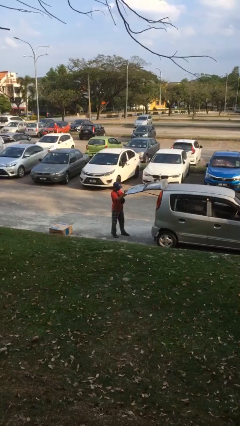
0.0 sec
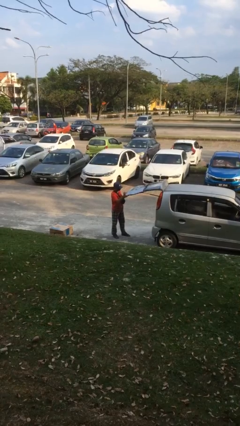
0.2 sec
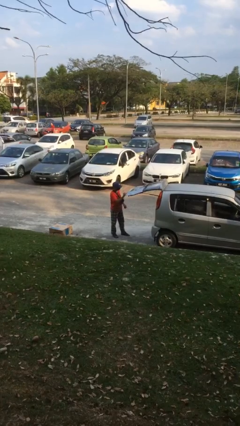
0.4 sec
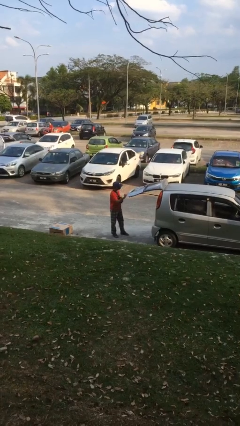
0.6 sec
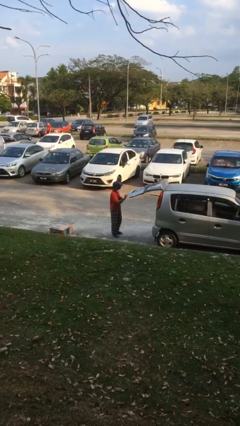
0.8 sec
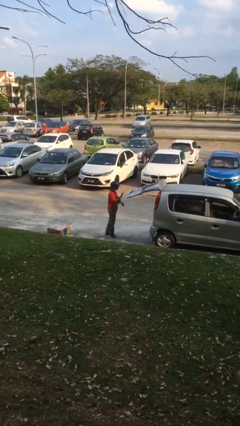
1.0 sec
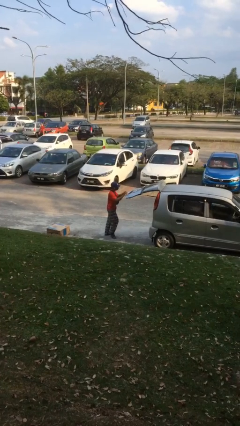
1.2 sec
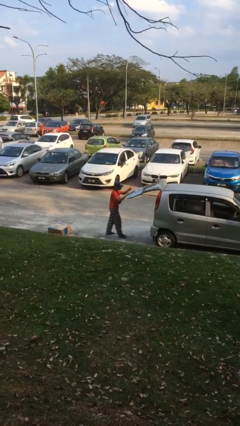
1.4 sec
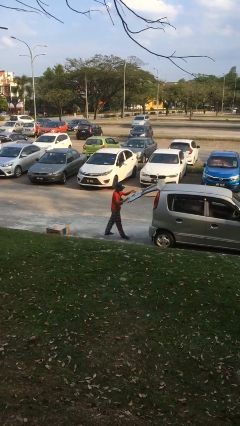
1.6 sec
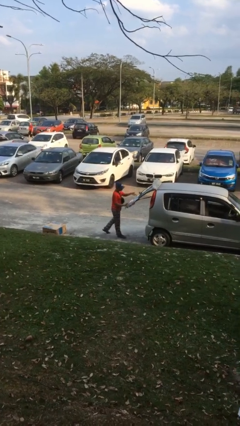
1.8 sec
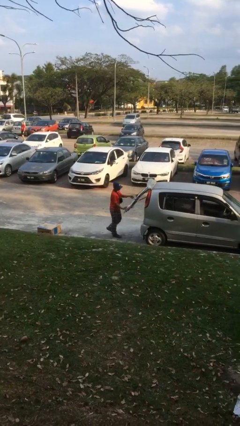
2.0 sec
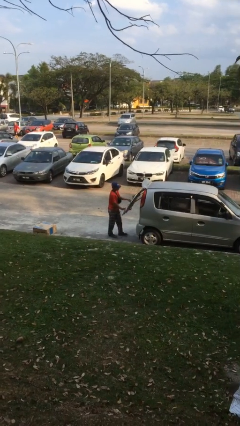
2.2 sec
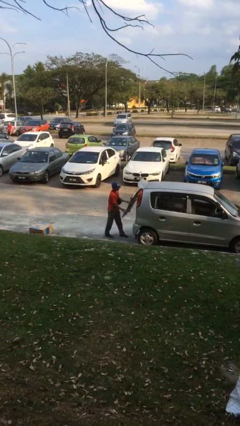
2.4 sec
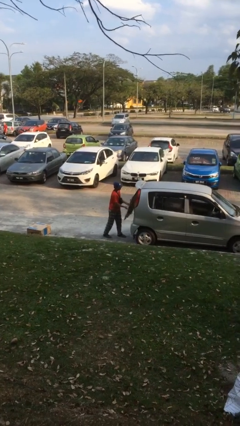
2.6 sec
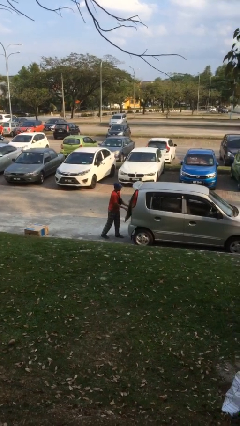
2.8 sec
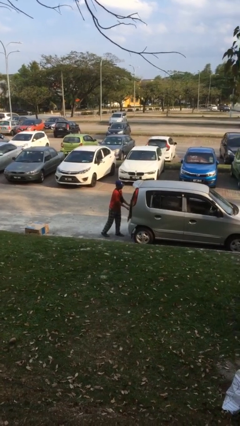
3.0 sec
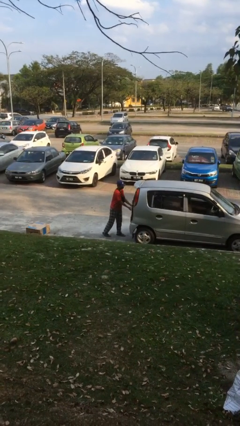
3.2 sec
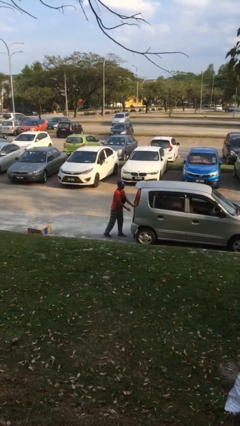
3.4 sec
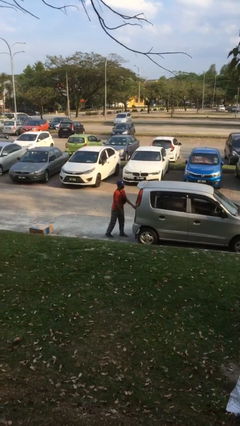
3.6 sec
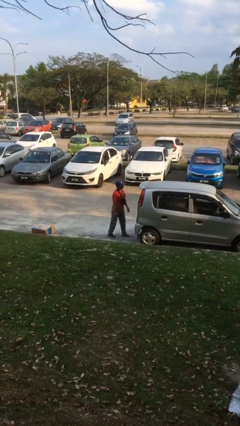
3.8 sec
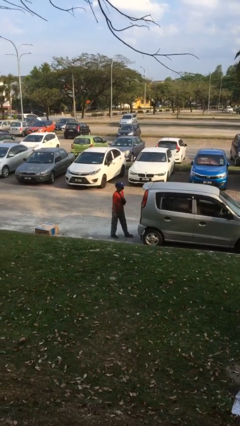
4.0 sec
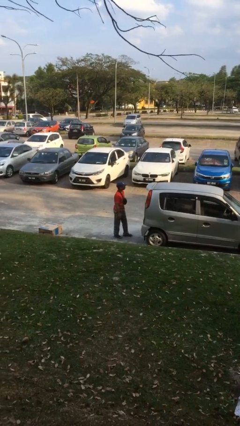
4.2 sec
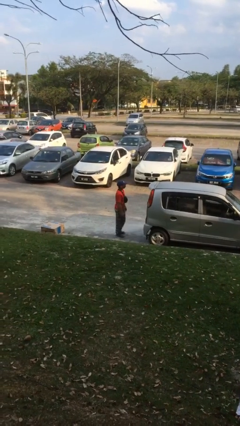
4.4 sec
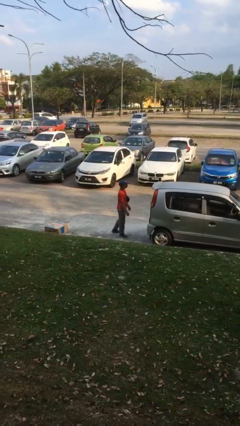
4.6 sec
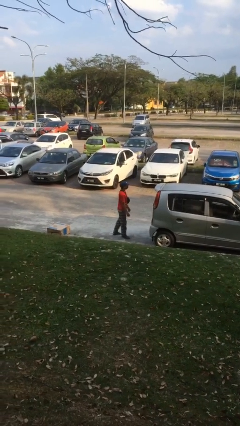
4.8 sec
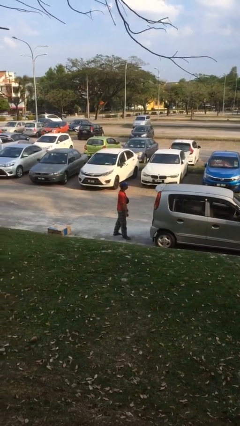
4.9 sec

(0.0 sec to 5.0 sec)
person closes car trunk

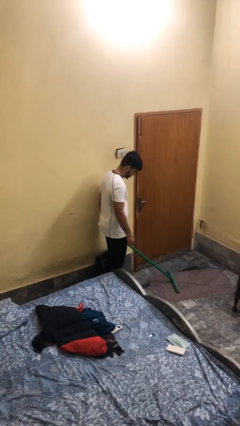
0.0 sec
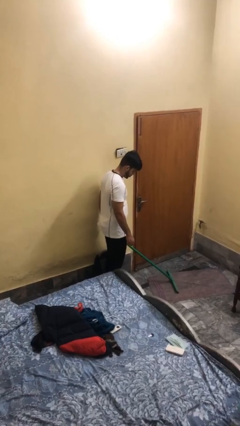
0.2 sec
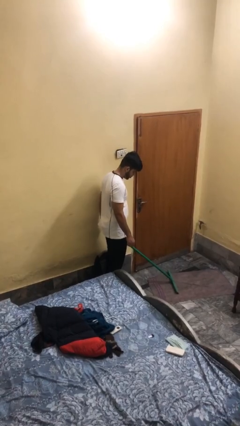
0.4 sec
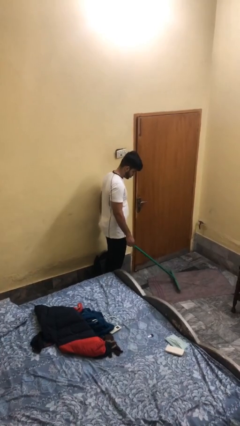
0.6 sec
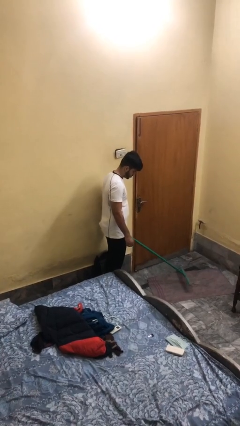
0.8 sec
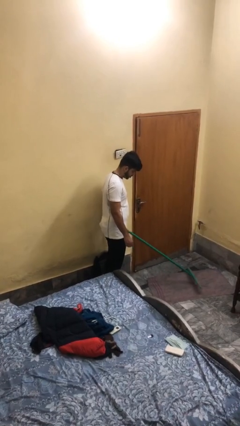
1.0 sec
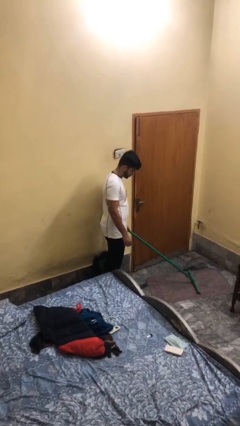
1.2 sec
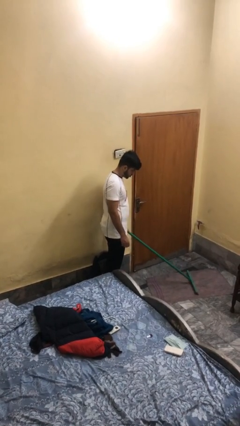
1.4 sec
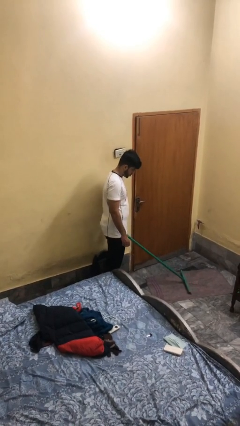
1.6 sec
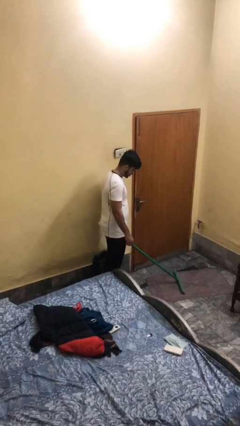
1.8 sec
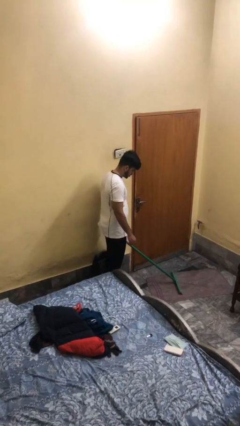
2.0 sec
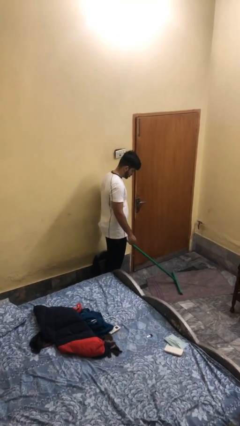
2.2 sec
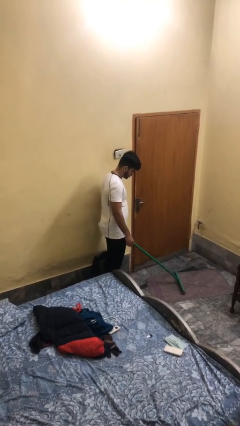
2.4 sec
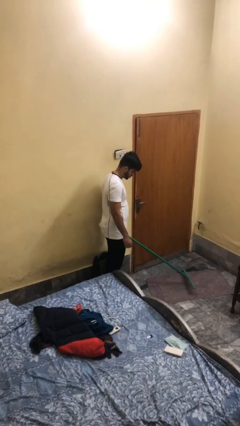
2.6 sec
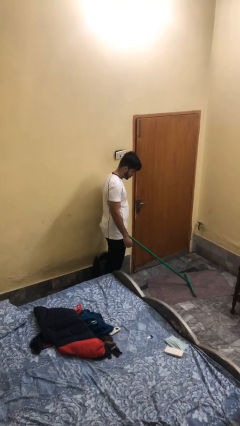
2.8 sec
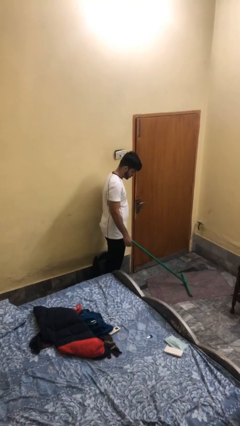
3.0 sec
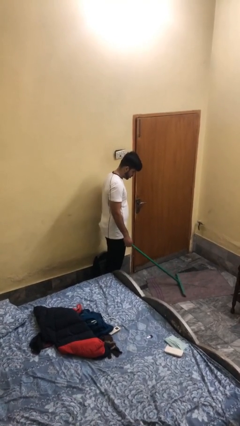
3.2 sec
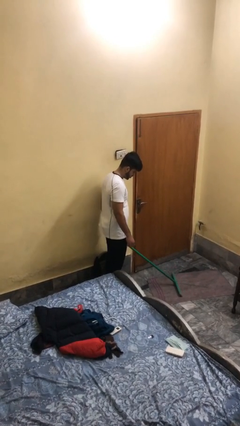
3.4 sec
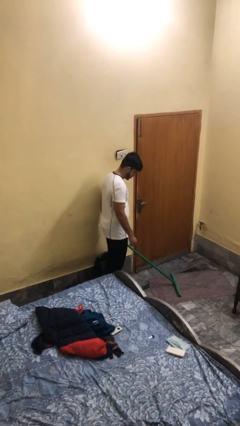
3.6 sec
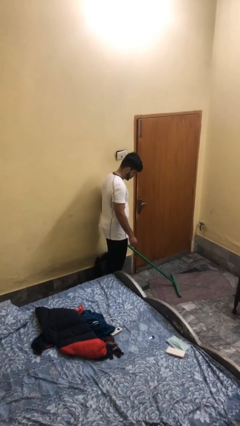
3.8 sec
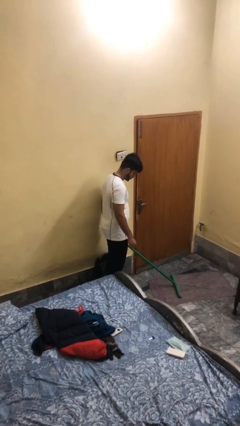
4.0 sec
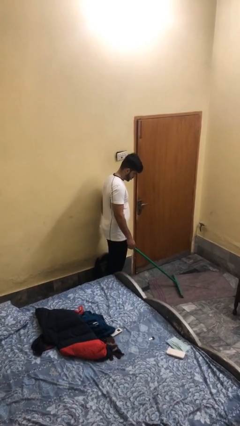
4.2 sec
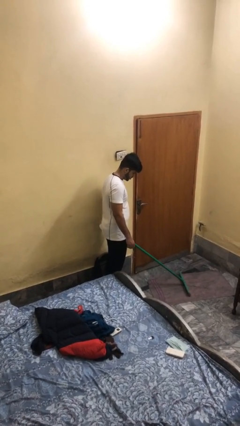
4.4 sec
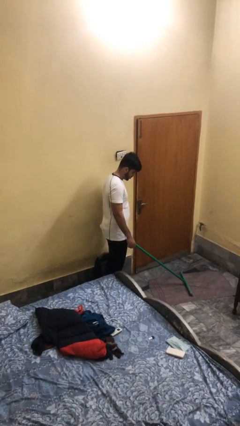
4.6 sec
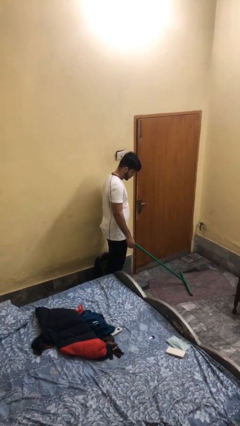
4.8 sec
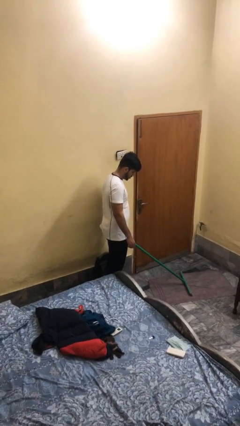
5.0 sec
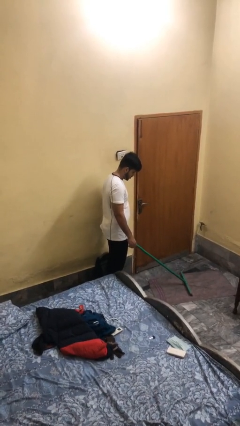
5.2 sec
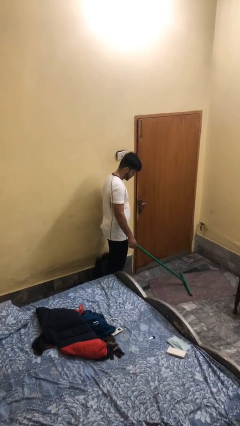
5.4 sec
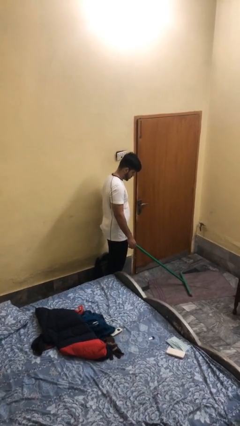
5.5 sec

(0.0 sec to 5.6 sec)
person vacuums carpet

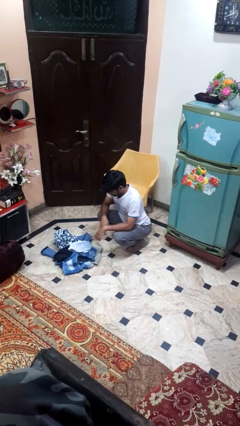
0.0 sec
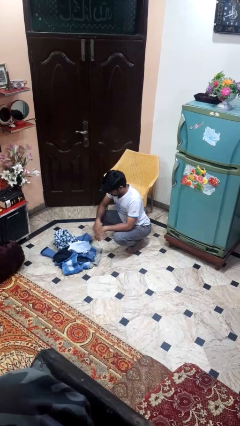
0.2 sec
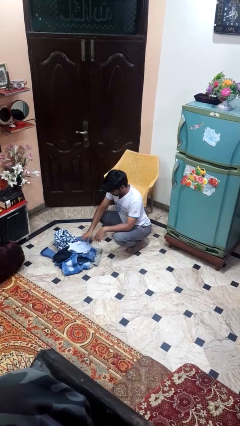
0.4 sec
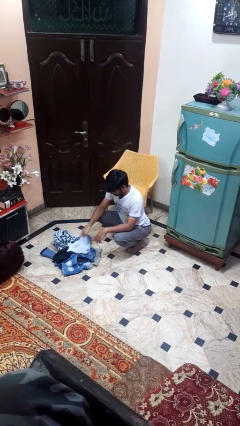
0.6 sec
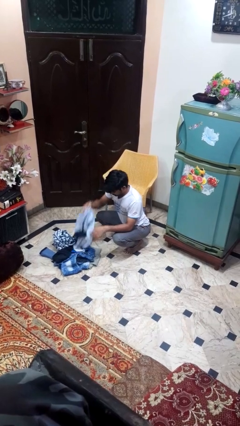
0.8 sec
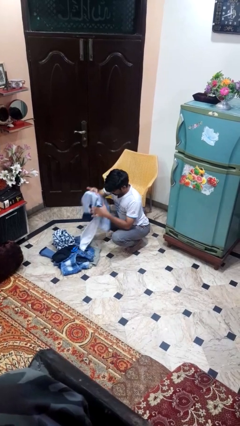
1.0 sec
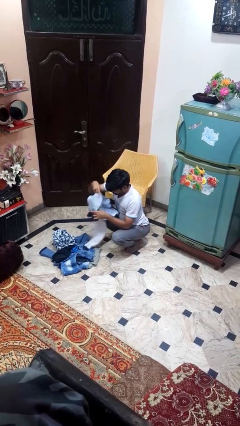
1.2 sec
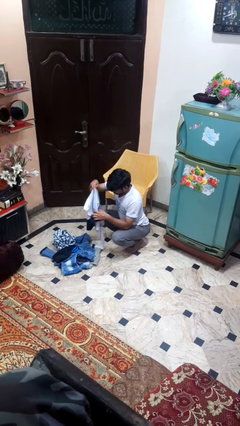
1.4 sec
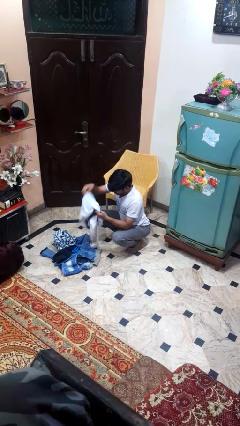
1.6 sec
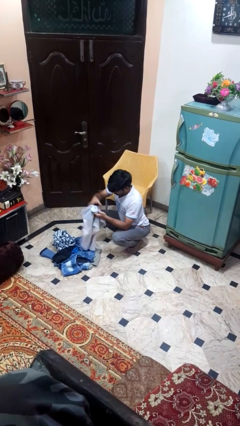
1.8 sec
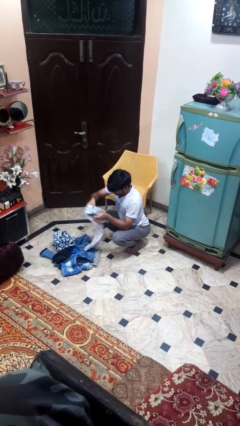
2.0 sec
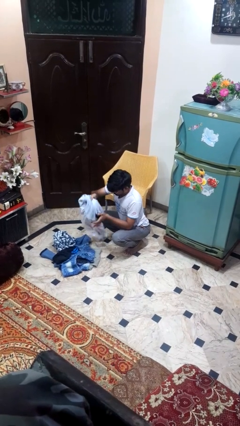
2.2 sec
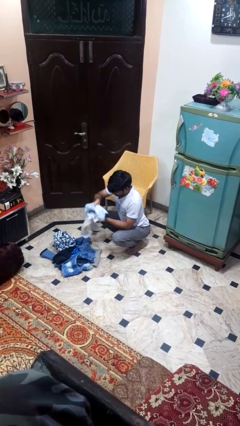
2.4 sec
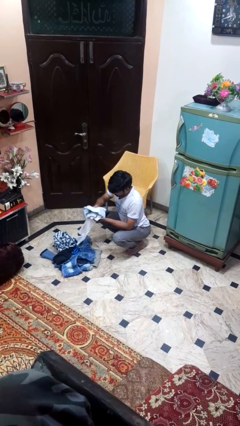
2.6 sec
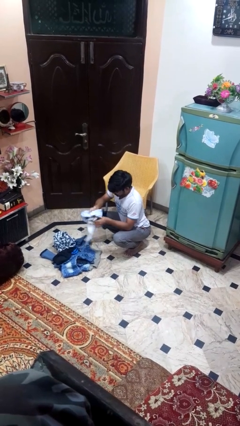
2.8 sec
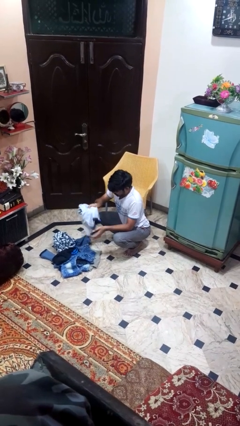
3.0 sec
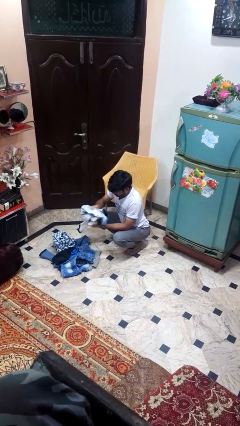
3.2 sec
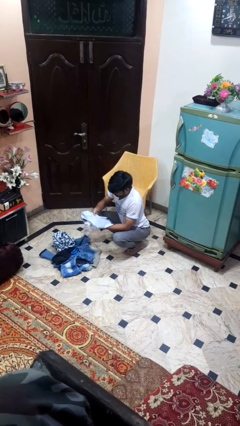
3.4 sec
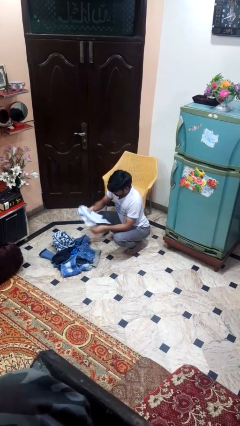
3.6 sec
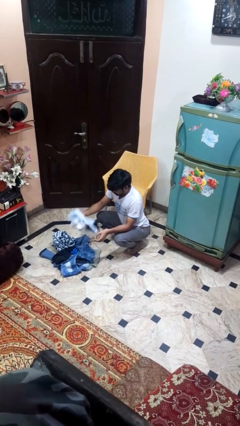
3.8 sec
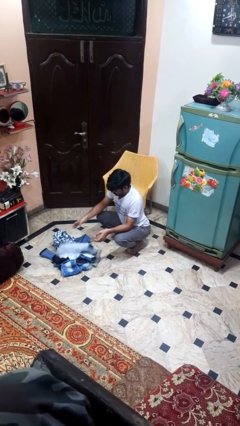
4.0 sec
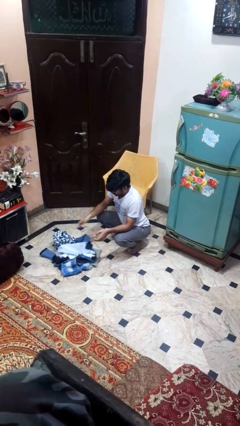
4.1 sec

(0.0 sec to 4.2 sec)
person folds pants

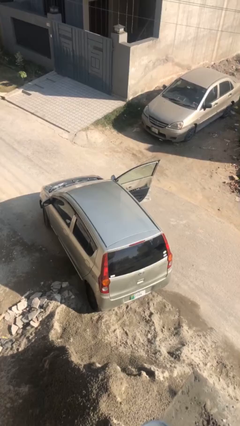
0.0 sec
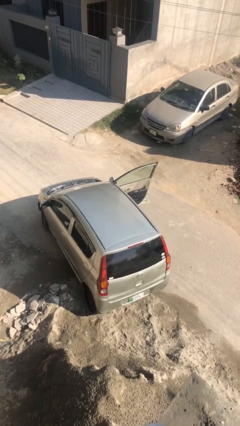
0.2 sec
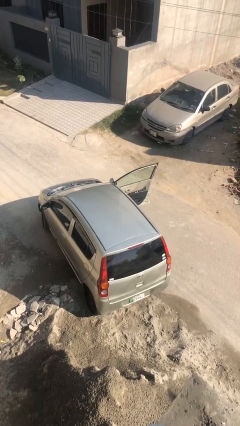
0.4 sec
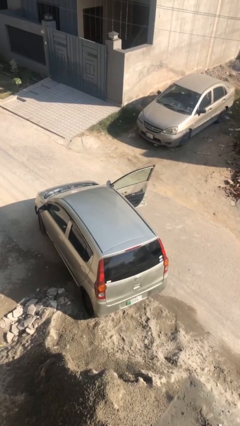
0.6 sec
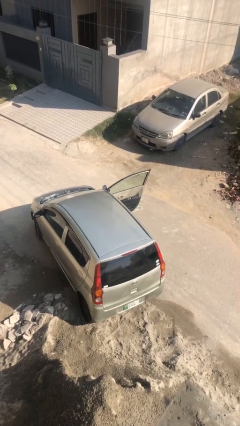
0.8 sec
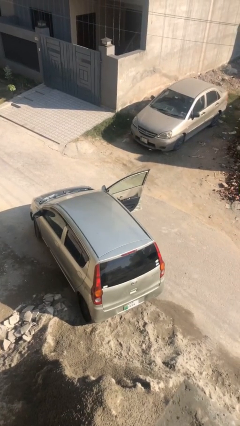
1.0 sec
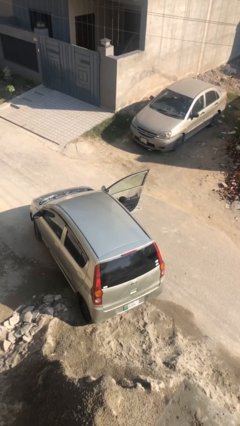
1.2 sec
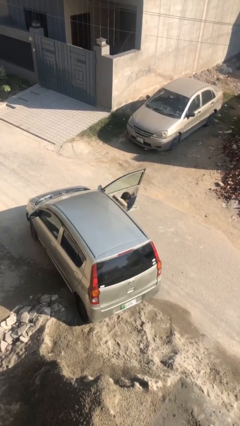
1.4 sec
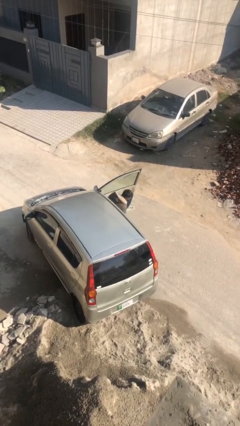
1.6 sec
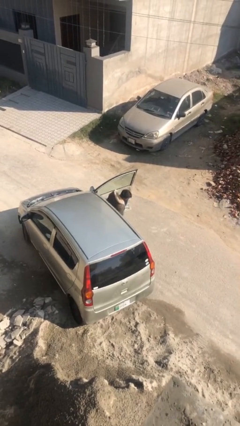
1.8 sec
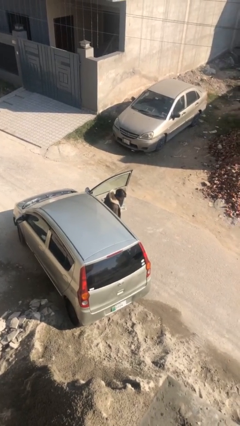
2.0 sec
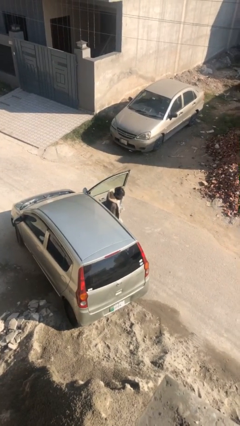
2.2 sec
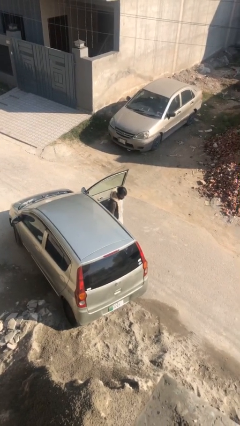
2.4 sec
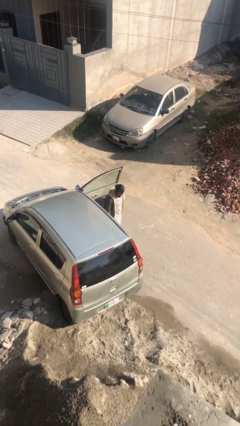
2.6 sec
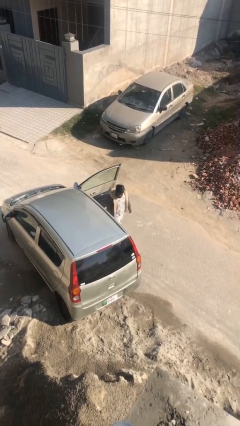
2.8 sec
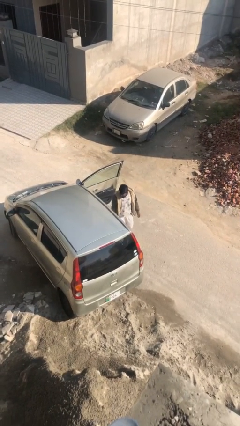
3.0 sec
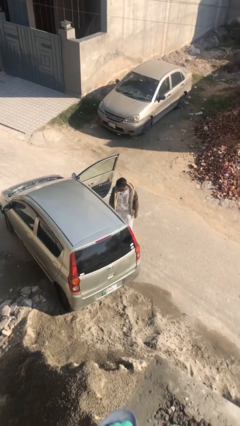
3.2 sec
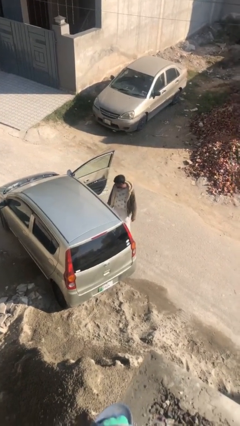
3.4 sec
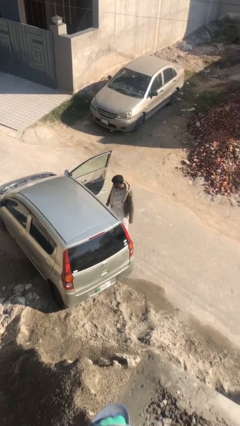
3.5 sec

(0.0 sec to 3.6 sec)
person exits car
